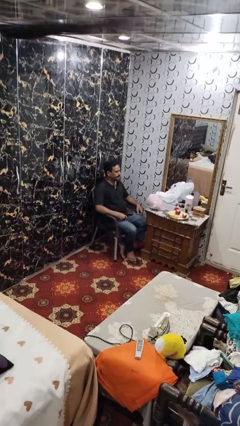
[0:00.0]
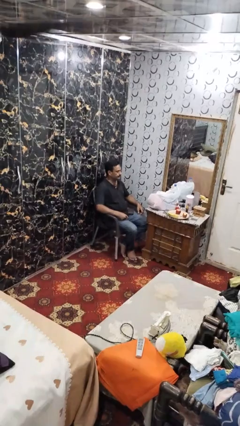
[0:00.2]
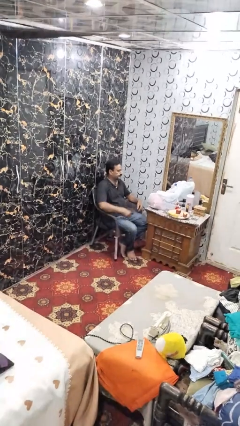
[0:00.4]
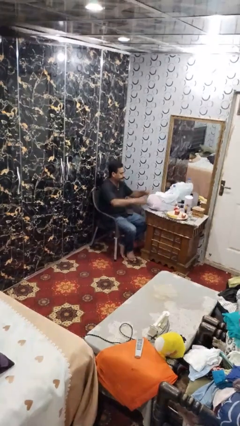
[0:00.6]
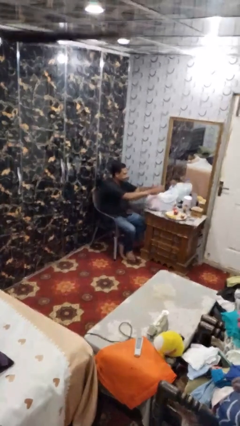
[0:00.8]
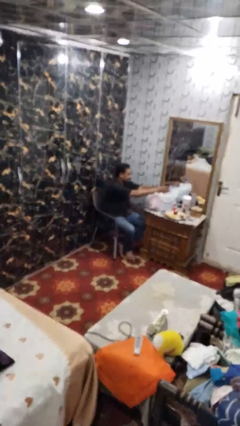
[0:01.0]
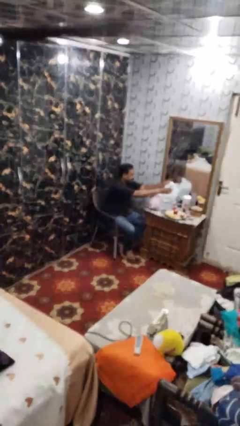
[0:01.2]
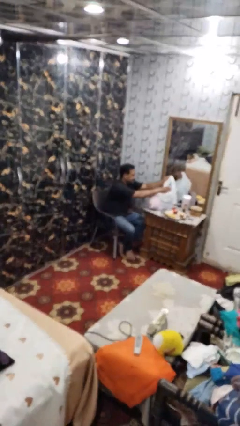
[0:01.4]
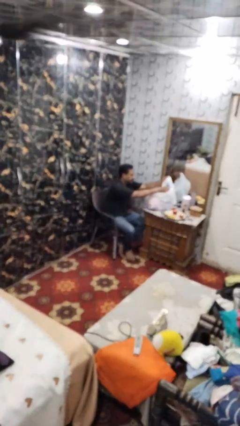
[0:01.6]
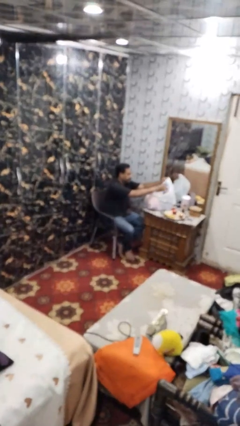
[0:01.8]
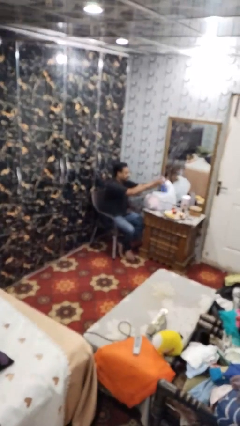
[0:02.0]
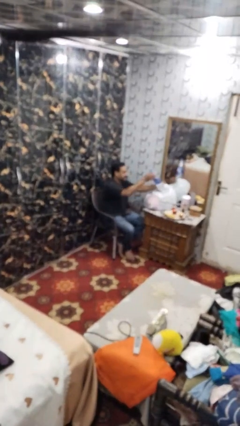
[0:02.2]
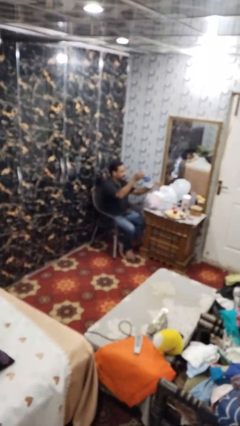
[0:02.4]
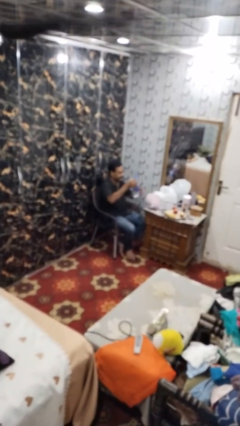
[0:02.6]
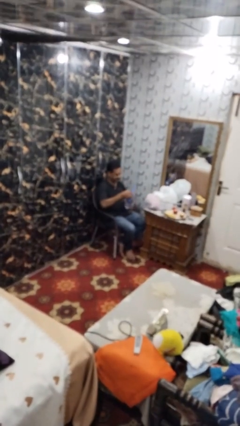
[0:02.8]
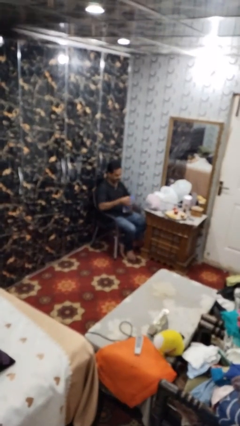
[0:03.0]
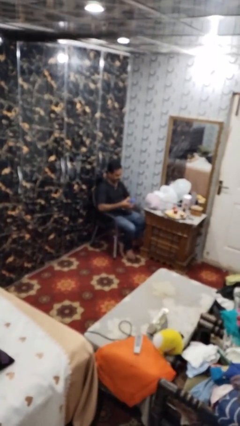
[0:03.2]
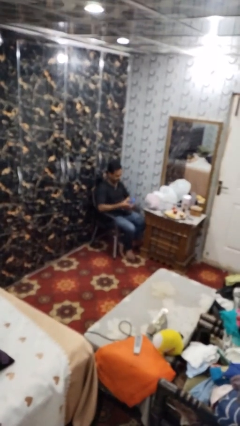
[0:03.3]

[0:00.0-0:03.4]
person takes object from bag

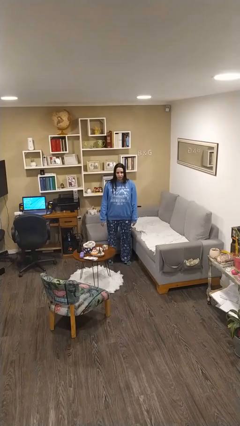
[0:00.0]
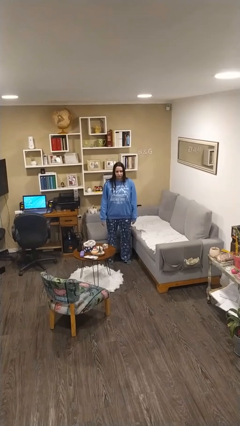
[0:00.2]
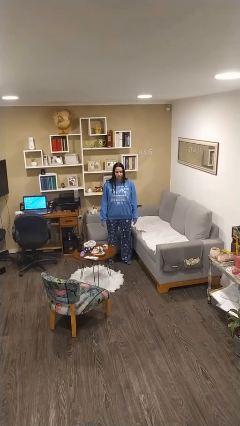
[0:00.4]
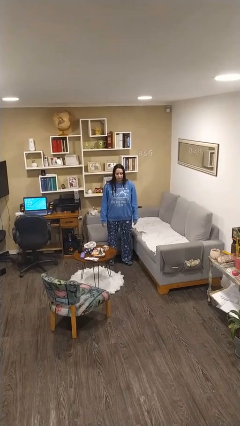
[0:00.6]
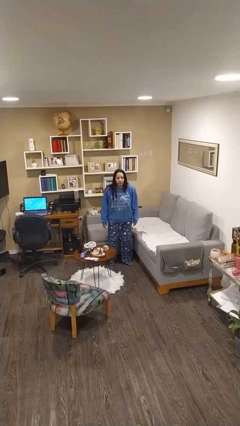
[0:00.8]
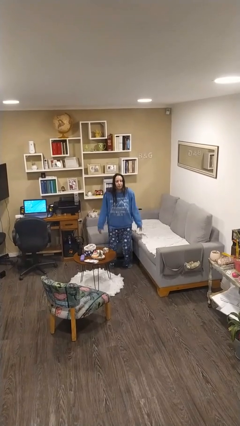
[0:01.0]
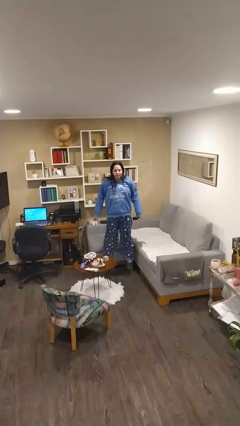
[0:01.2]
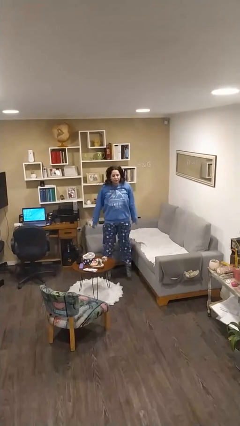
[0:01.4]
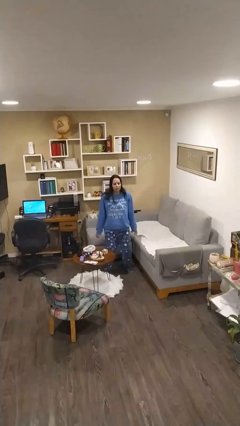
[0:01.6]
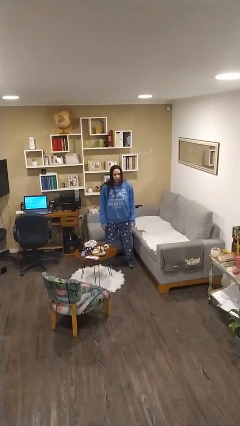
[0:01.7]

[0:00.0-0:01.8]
person jumps

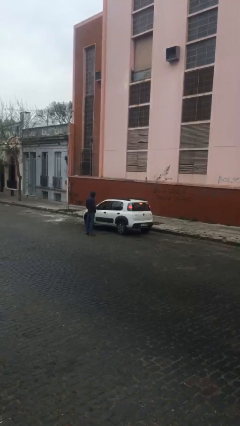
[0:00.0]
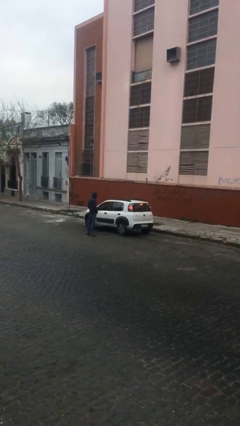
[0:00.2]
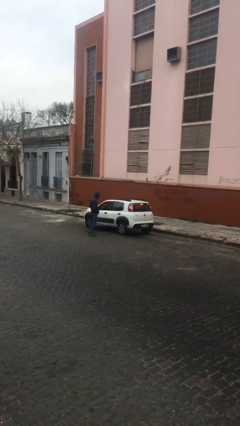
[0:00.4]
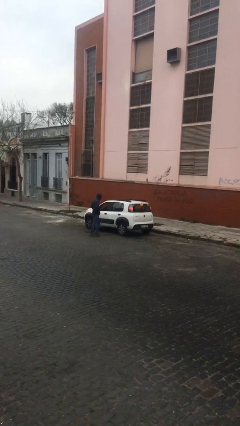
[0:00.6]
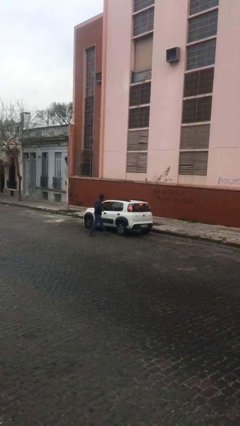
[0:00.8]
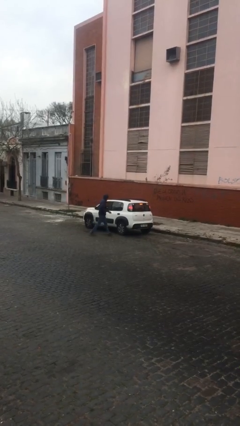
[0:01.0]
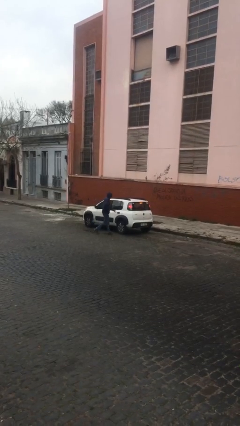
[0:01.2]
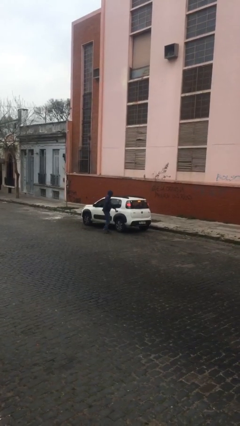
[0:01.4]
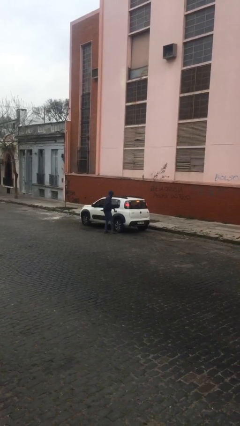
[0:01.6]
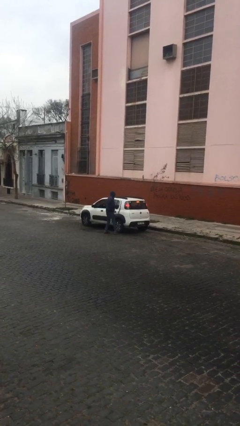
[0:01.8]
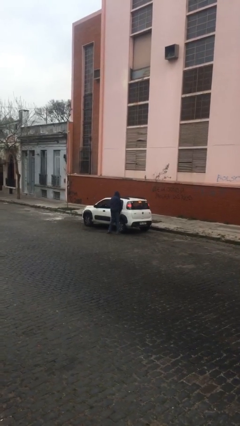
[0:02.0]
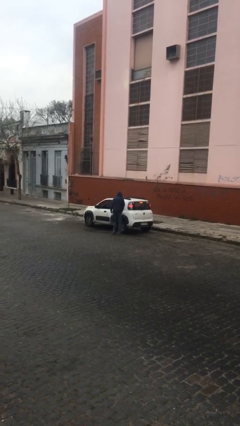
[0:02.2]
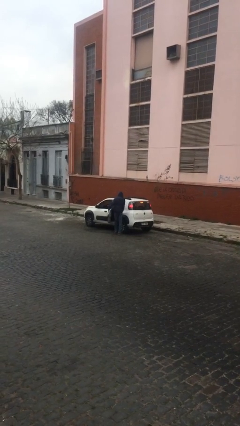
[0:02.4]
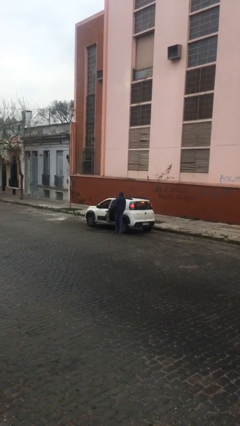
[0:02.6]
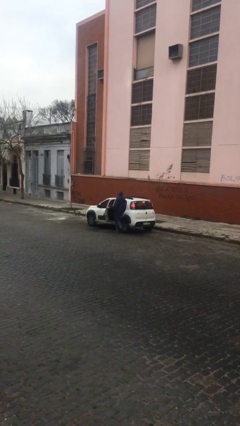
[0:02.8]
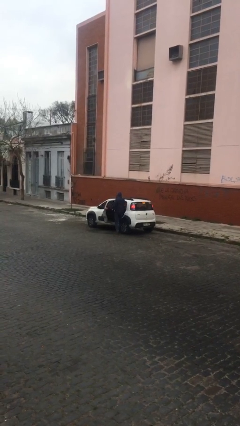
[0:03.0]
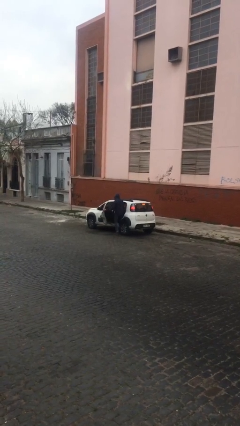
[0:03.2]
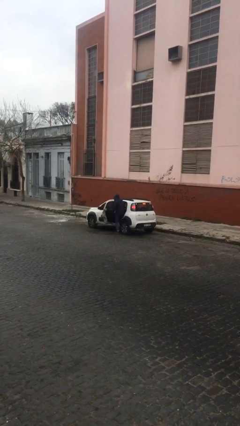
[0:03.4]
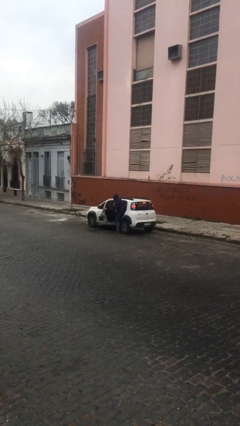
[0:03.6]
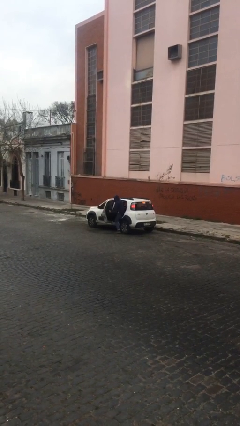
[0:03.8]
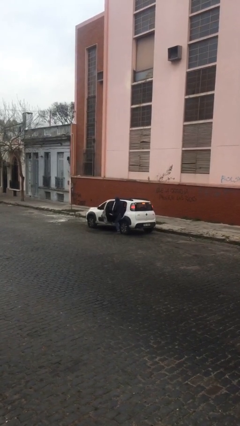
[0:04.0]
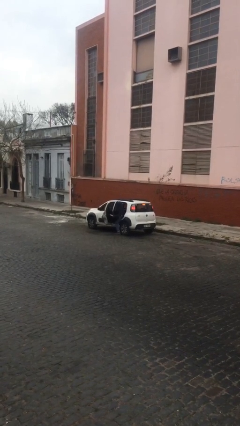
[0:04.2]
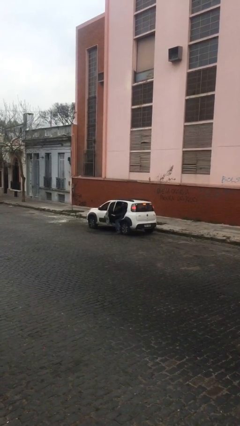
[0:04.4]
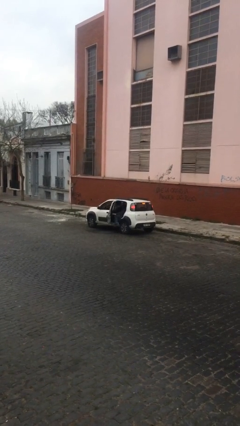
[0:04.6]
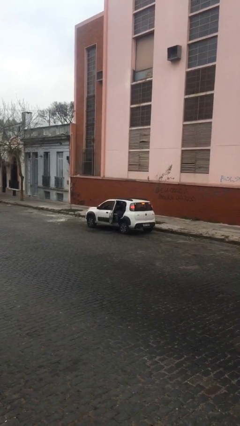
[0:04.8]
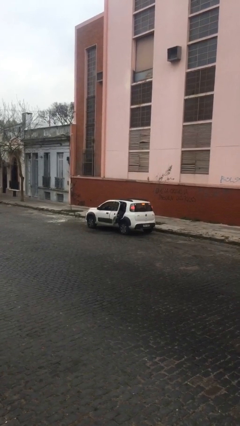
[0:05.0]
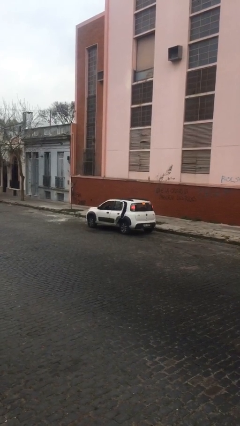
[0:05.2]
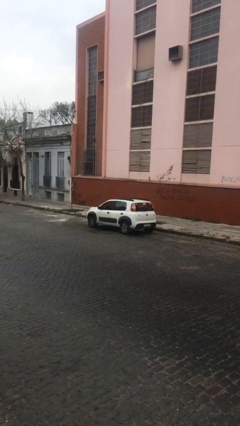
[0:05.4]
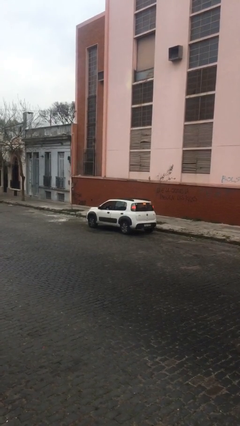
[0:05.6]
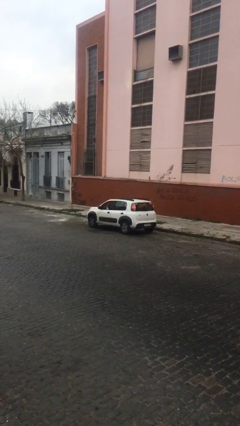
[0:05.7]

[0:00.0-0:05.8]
car picks up person

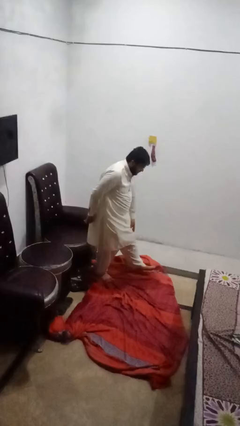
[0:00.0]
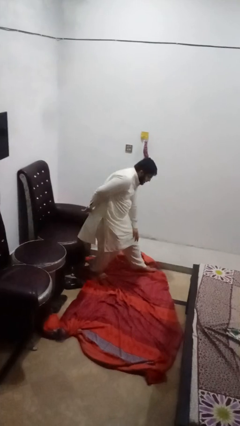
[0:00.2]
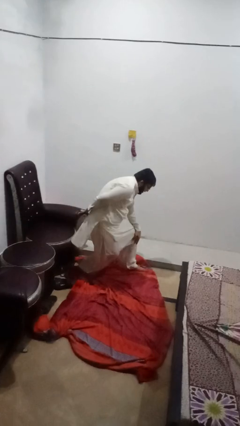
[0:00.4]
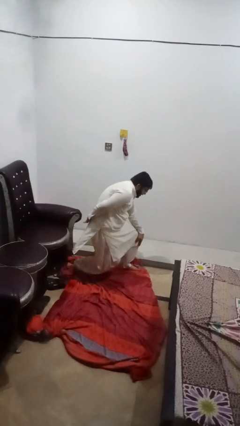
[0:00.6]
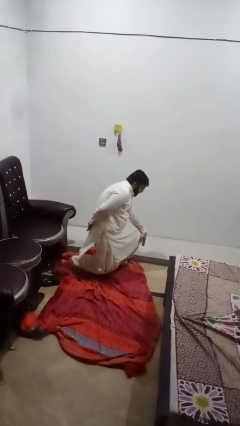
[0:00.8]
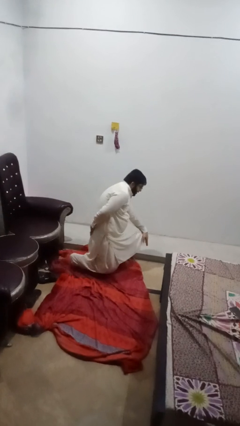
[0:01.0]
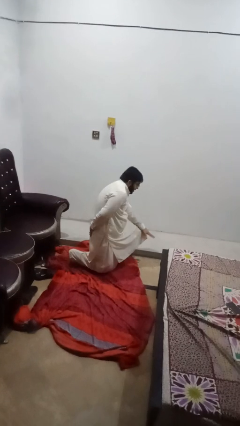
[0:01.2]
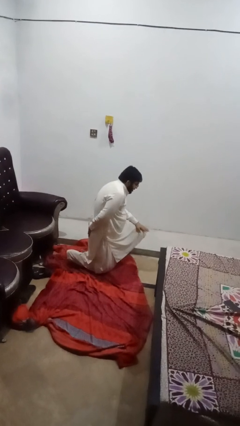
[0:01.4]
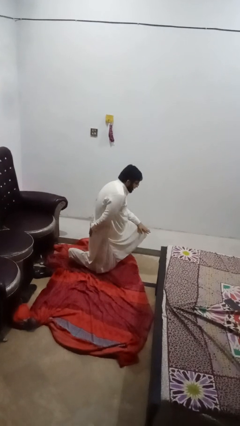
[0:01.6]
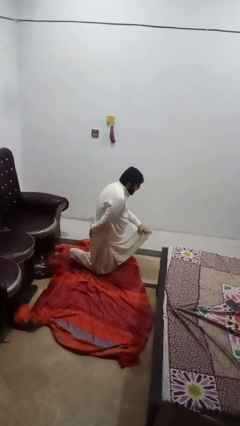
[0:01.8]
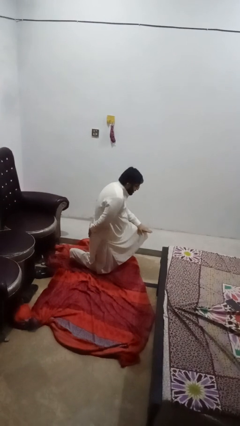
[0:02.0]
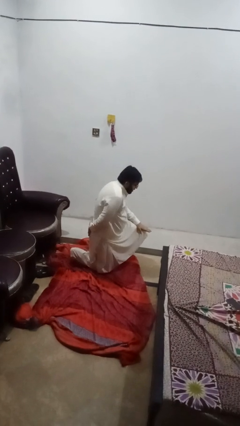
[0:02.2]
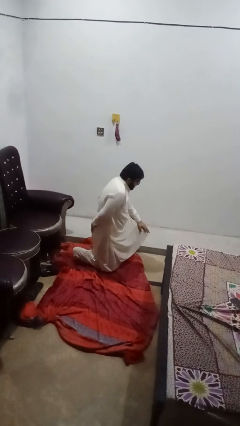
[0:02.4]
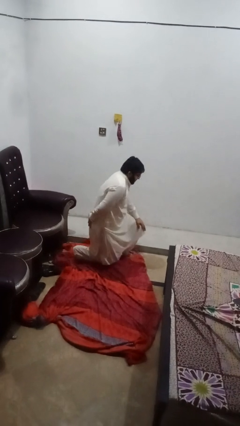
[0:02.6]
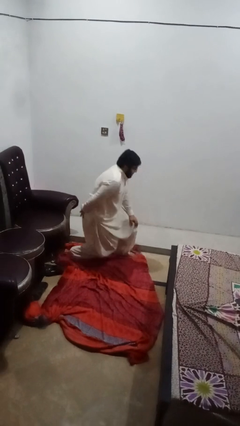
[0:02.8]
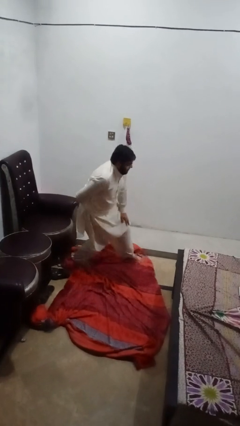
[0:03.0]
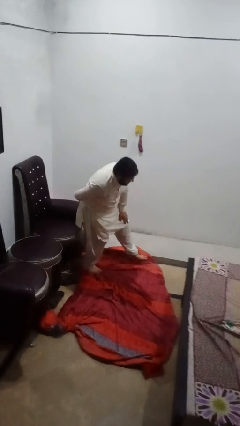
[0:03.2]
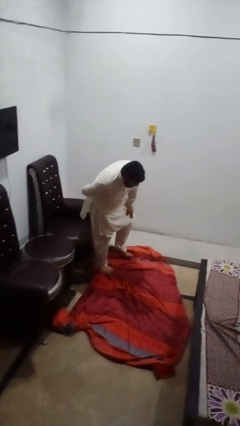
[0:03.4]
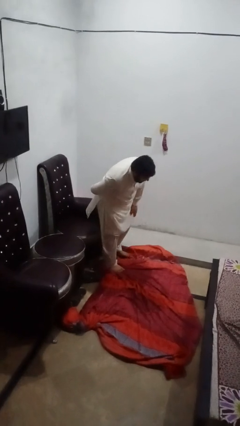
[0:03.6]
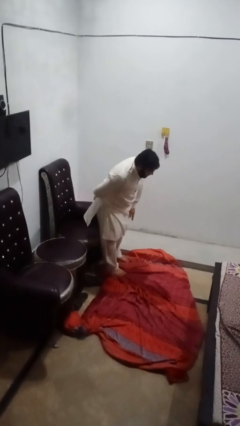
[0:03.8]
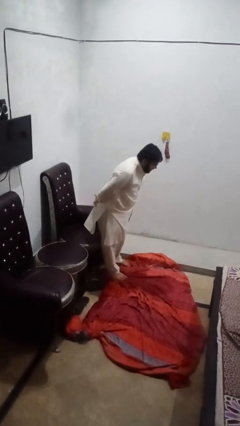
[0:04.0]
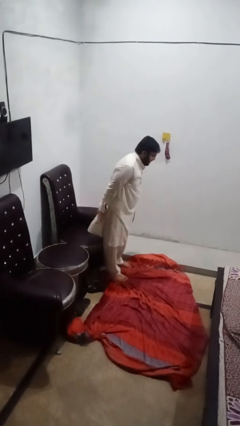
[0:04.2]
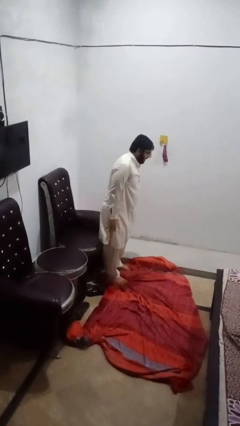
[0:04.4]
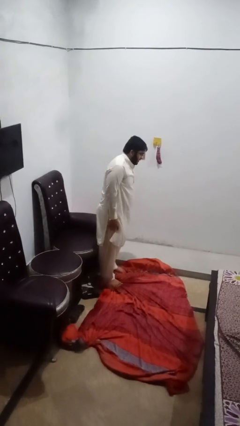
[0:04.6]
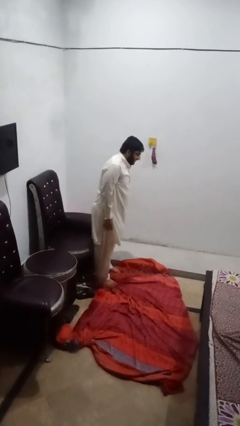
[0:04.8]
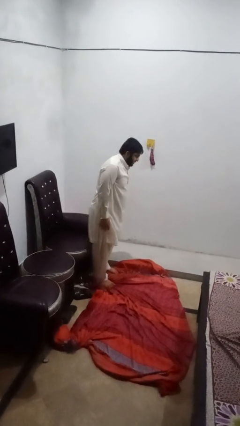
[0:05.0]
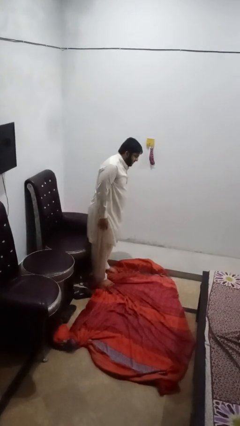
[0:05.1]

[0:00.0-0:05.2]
person exercises with lunges

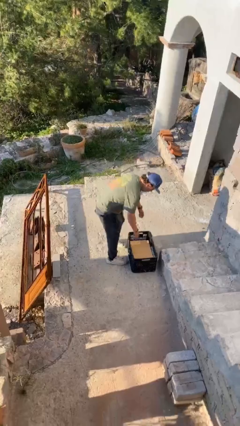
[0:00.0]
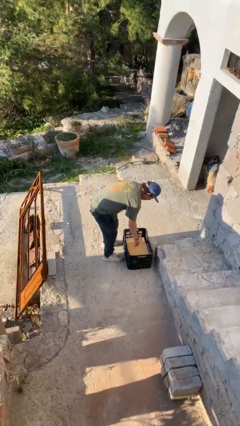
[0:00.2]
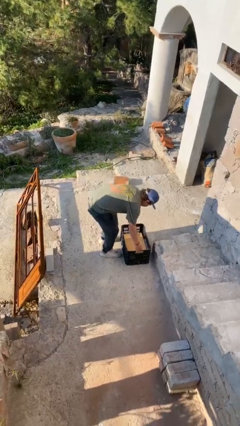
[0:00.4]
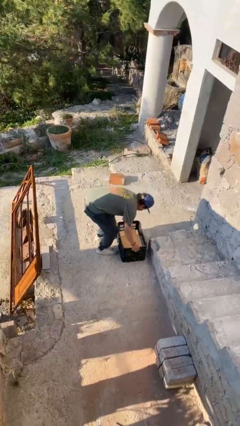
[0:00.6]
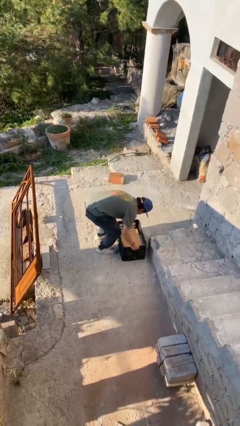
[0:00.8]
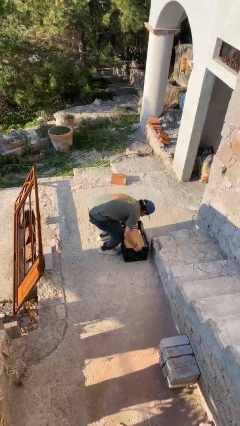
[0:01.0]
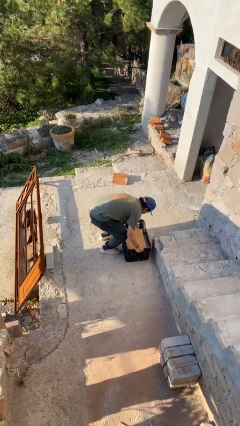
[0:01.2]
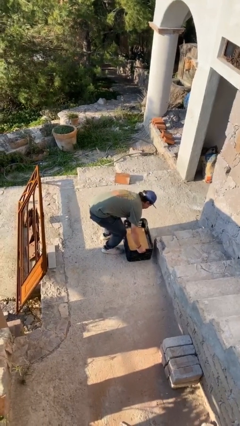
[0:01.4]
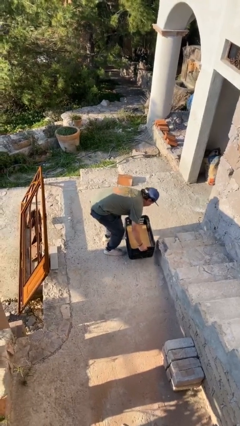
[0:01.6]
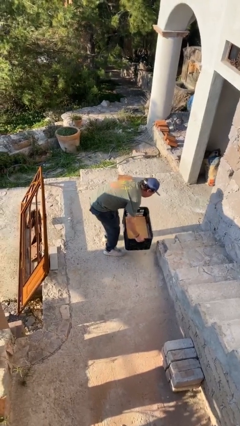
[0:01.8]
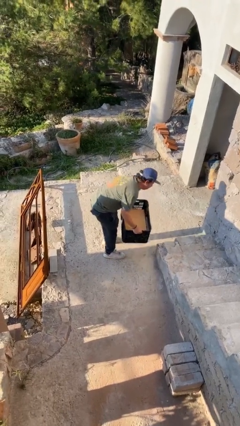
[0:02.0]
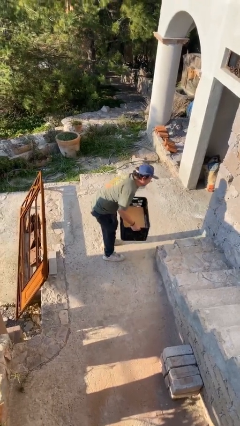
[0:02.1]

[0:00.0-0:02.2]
person picks up object from floor
